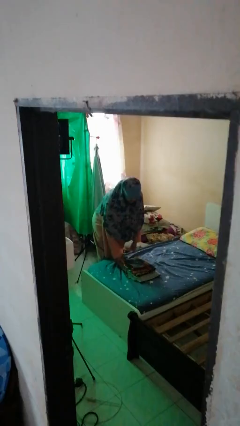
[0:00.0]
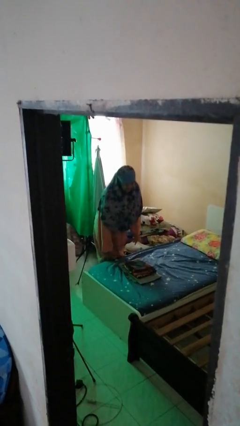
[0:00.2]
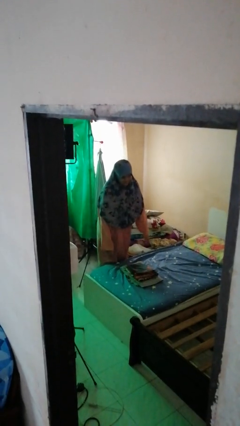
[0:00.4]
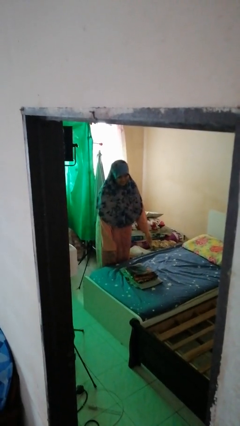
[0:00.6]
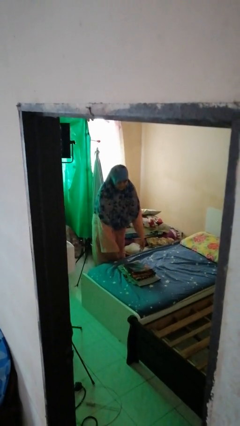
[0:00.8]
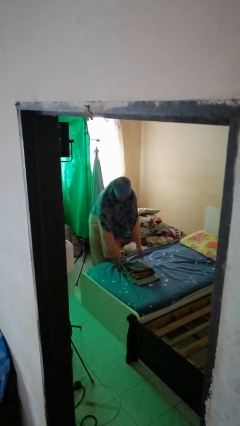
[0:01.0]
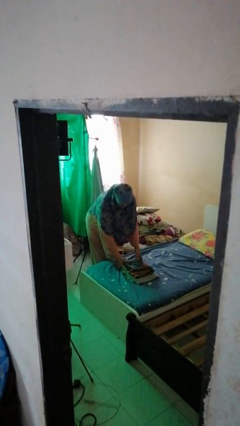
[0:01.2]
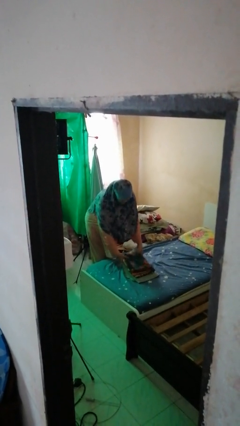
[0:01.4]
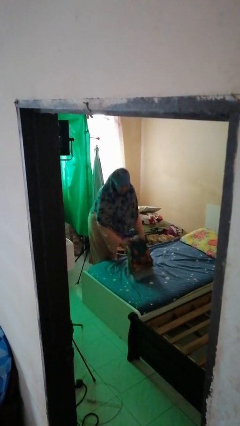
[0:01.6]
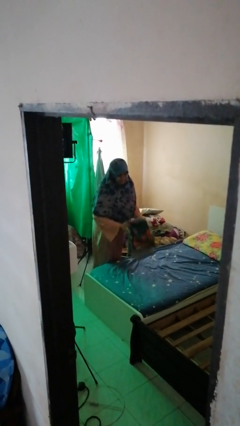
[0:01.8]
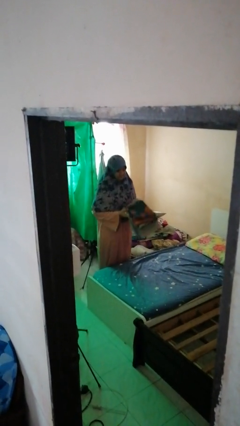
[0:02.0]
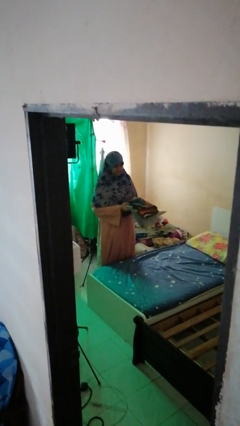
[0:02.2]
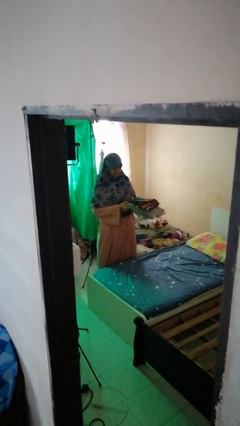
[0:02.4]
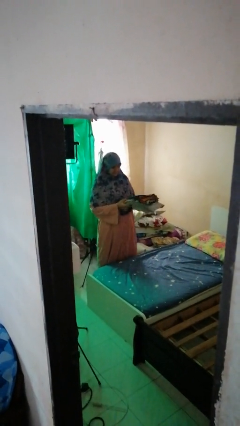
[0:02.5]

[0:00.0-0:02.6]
person picks up object from bed

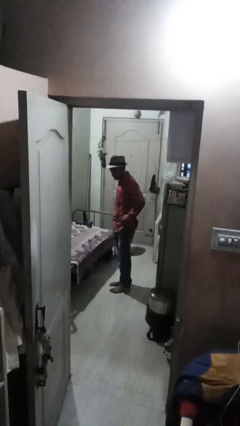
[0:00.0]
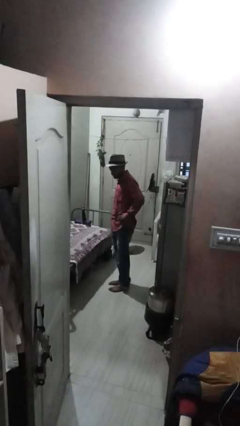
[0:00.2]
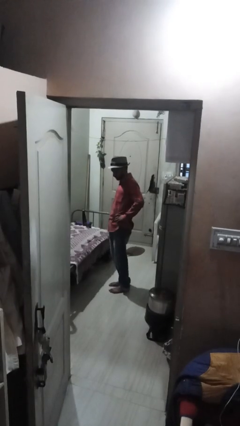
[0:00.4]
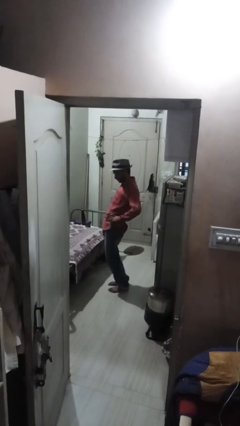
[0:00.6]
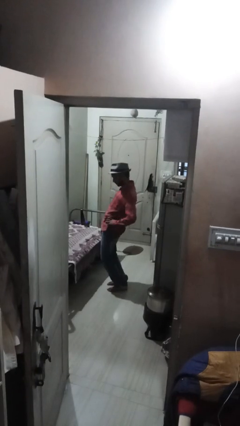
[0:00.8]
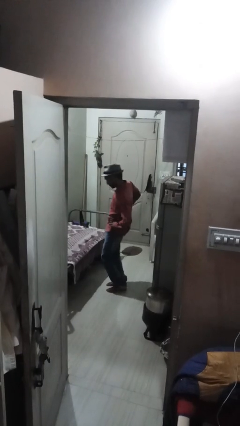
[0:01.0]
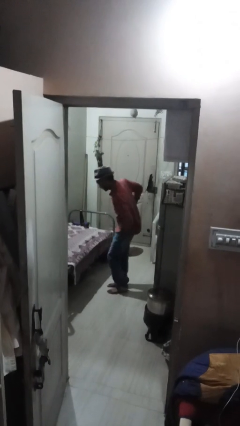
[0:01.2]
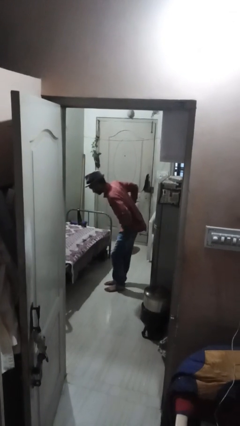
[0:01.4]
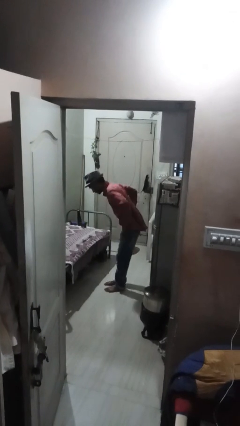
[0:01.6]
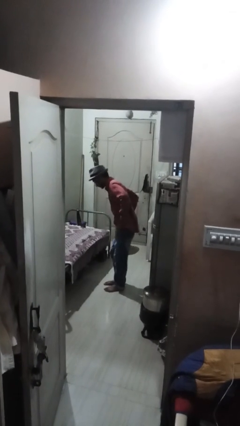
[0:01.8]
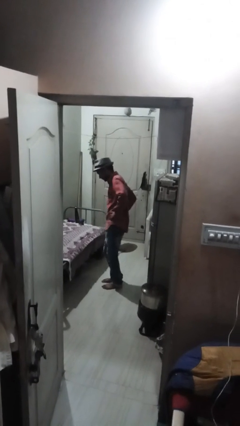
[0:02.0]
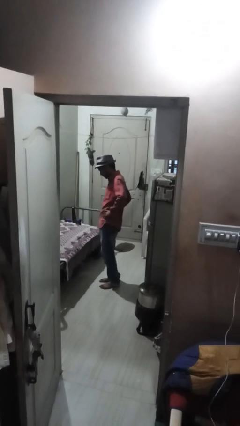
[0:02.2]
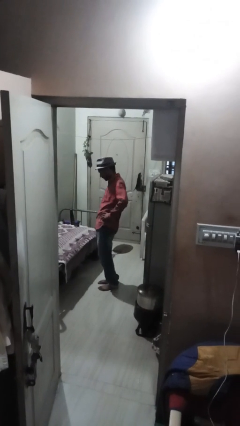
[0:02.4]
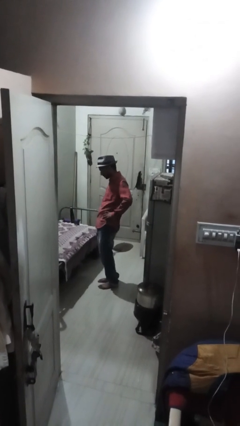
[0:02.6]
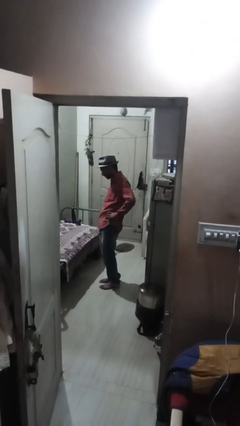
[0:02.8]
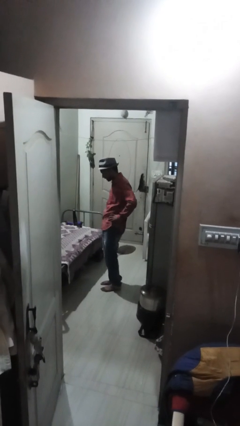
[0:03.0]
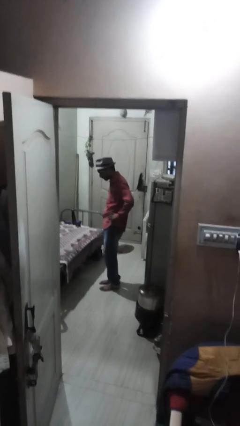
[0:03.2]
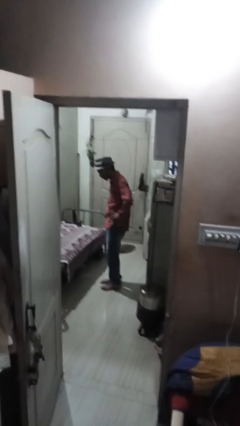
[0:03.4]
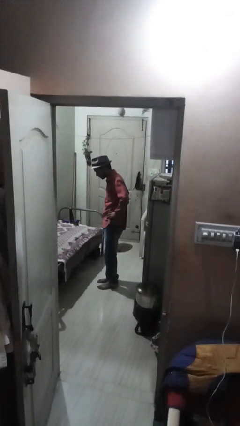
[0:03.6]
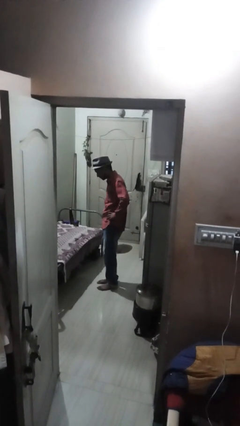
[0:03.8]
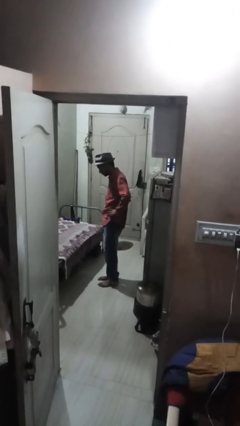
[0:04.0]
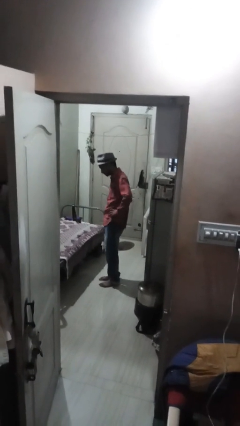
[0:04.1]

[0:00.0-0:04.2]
person wiggles hips

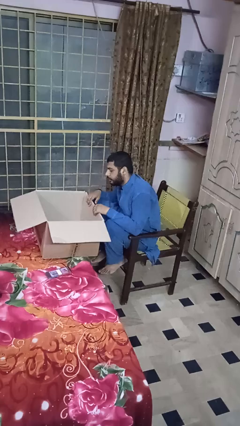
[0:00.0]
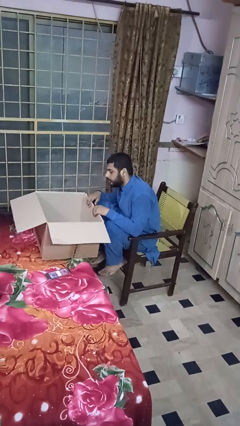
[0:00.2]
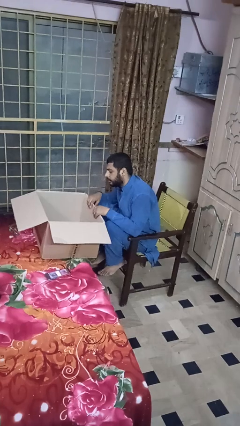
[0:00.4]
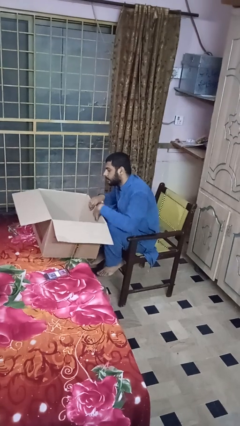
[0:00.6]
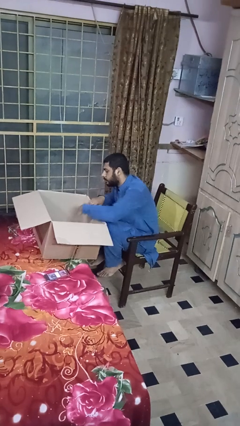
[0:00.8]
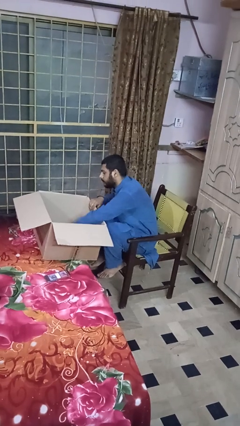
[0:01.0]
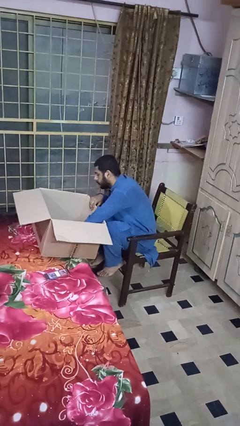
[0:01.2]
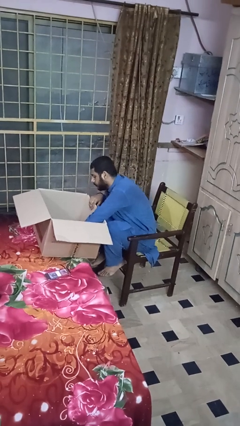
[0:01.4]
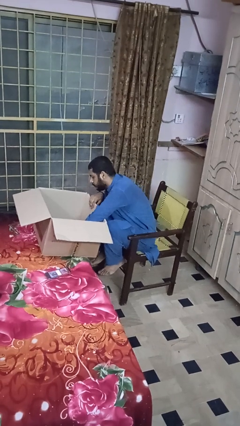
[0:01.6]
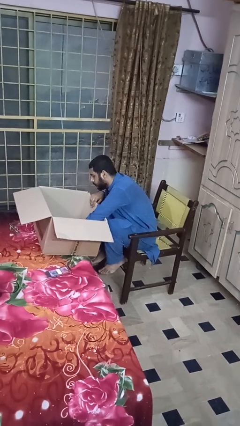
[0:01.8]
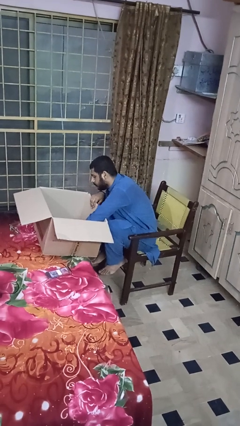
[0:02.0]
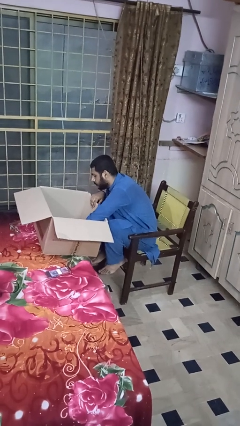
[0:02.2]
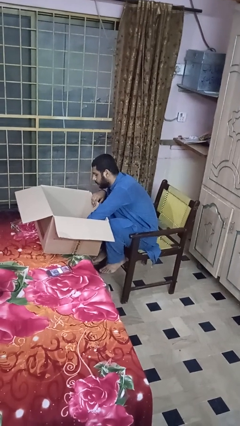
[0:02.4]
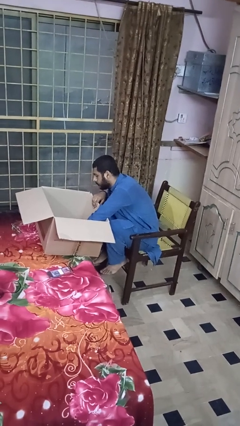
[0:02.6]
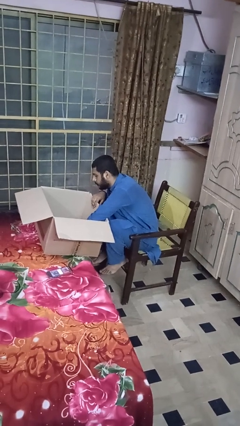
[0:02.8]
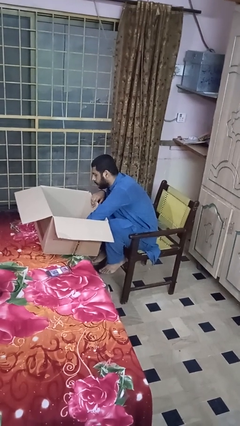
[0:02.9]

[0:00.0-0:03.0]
person searches in box

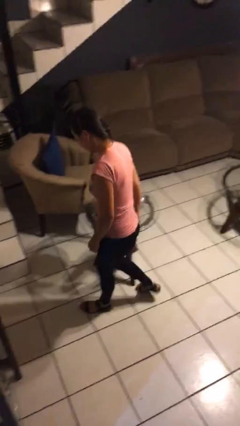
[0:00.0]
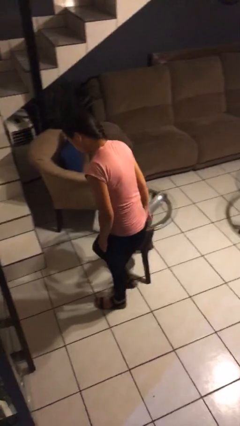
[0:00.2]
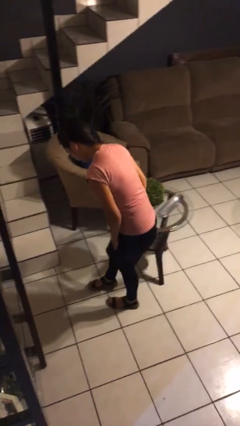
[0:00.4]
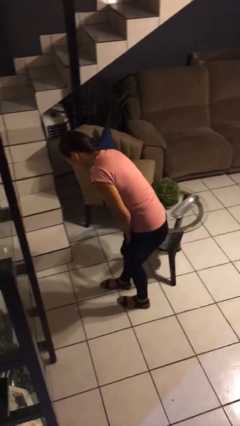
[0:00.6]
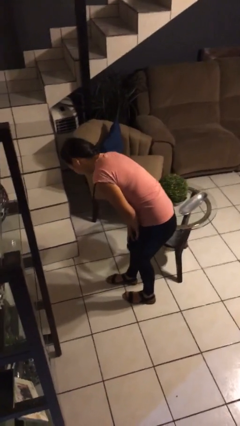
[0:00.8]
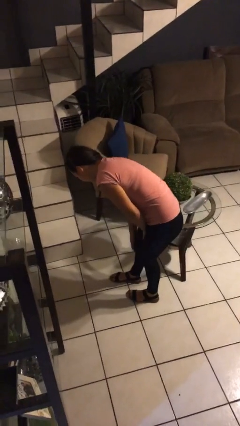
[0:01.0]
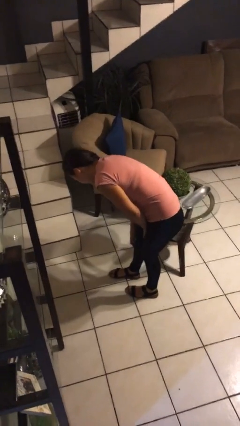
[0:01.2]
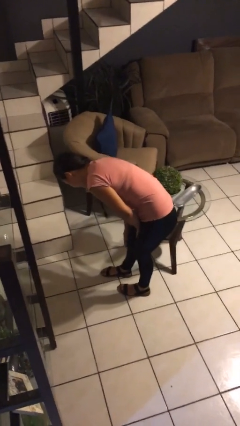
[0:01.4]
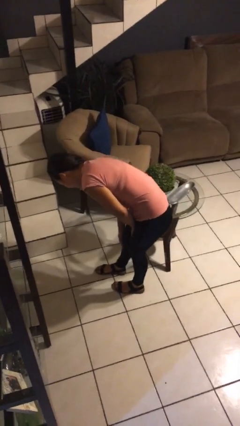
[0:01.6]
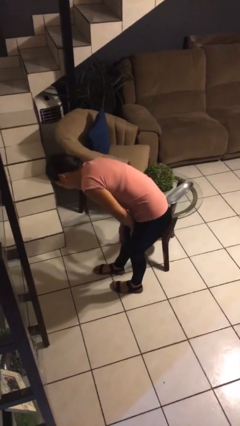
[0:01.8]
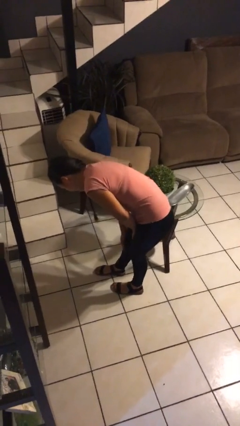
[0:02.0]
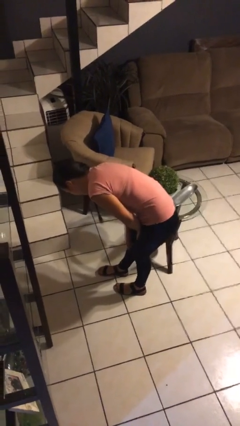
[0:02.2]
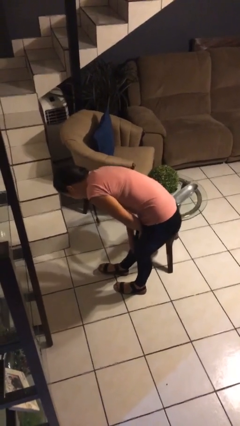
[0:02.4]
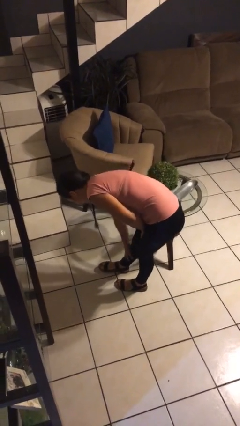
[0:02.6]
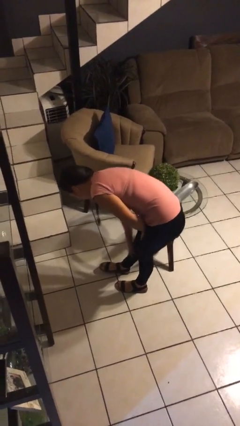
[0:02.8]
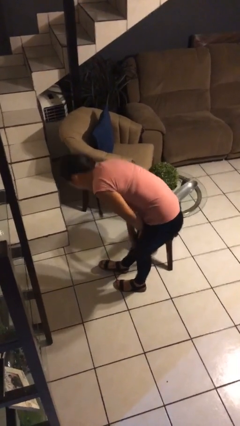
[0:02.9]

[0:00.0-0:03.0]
person bumps into table

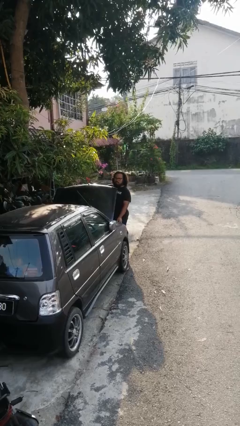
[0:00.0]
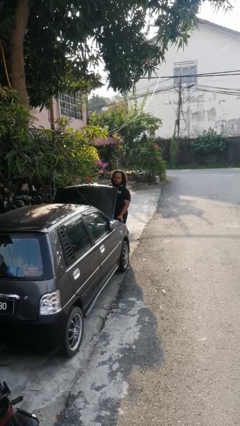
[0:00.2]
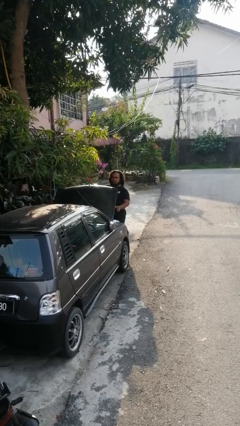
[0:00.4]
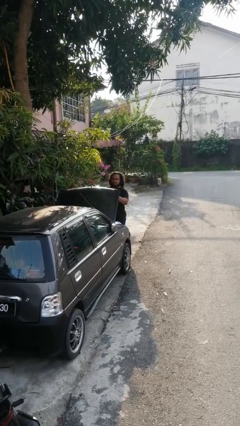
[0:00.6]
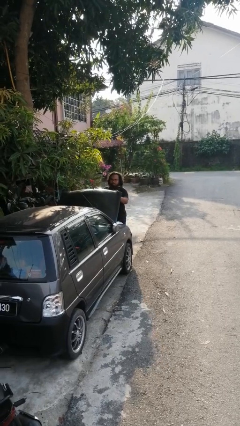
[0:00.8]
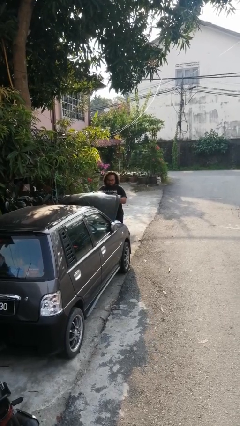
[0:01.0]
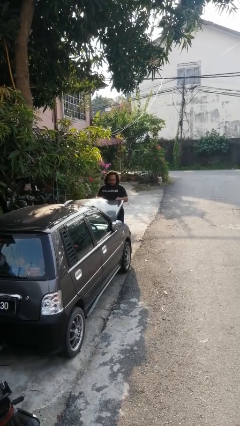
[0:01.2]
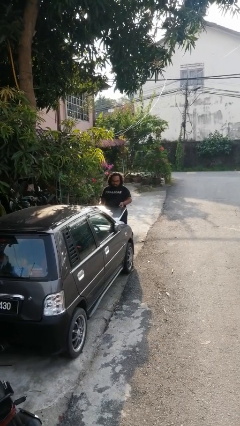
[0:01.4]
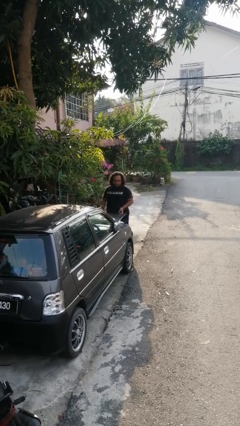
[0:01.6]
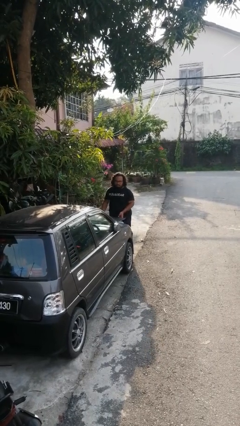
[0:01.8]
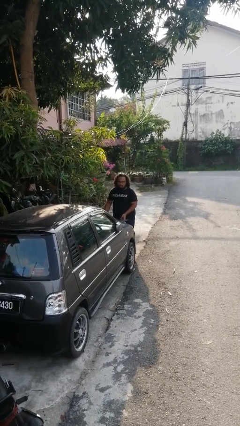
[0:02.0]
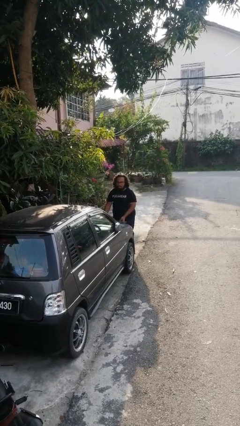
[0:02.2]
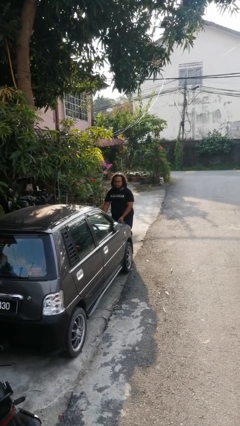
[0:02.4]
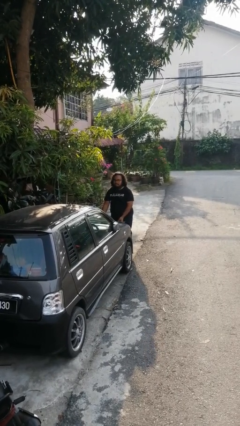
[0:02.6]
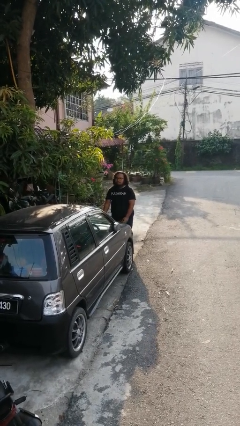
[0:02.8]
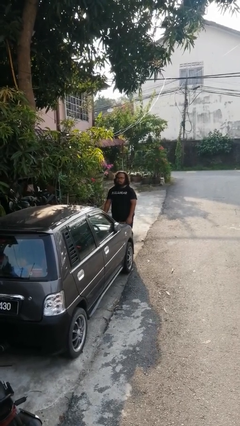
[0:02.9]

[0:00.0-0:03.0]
person closes car hood

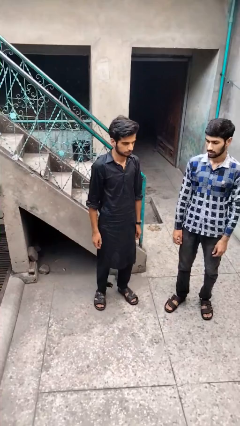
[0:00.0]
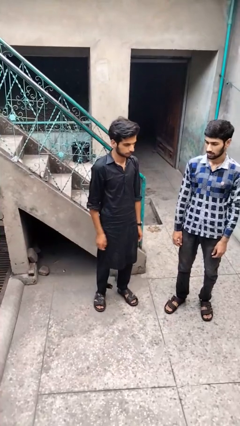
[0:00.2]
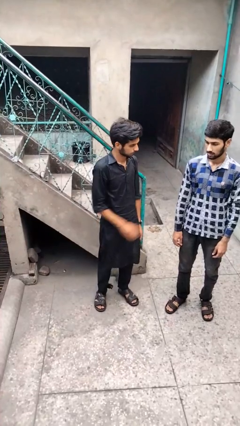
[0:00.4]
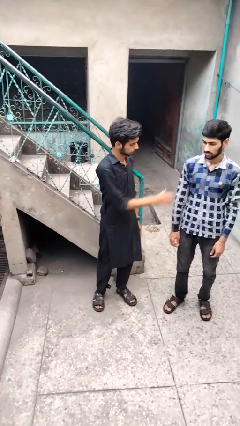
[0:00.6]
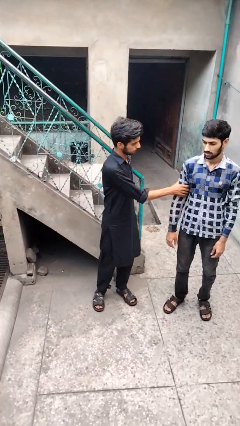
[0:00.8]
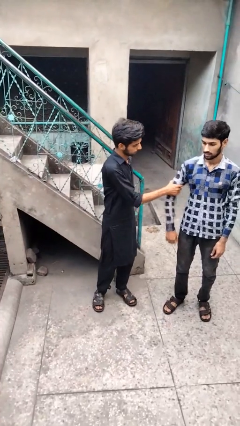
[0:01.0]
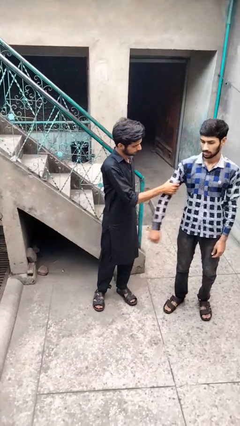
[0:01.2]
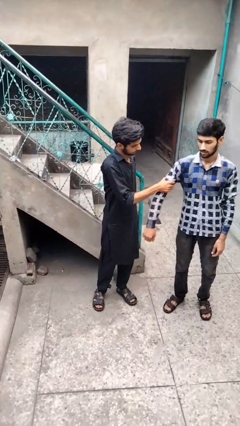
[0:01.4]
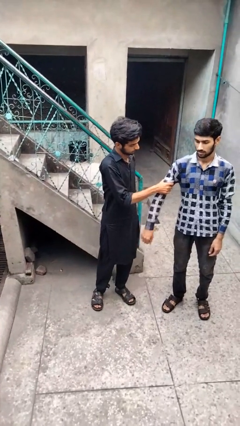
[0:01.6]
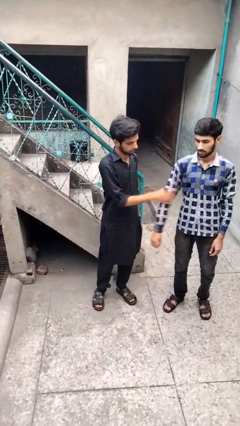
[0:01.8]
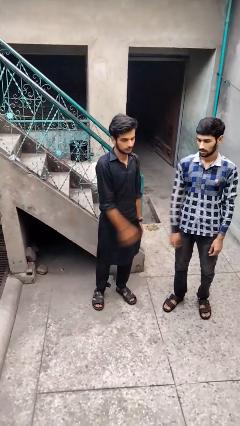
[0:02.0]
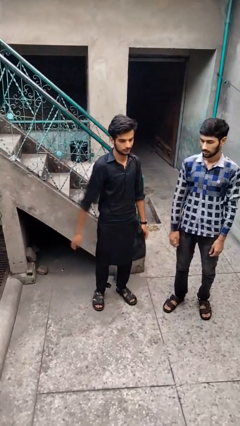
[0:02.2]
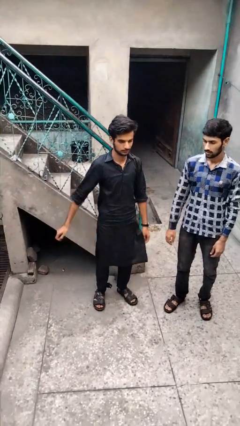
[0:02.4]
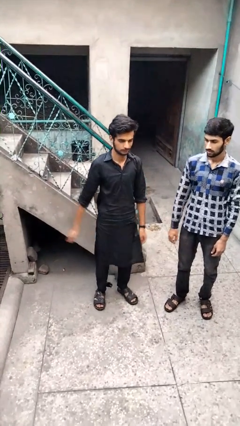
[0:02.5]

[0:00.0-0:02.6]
person grabs person by bicep
